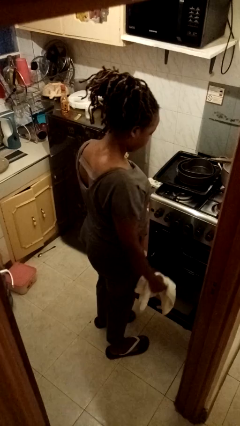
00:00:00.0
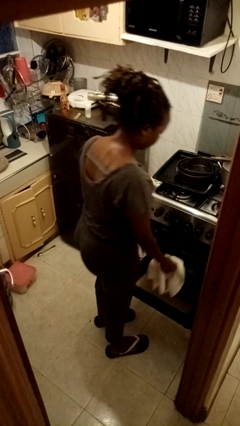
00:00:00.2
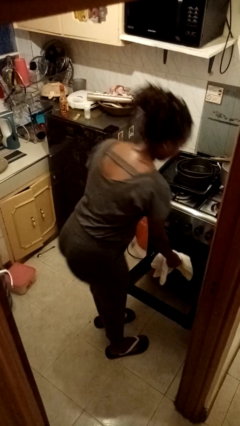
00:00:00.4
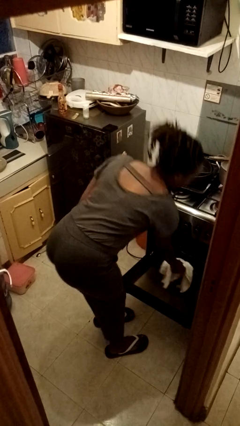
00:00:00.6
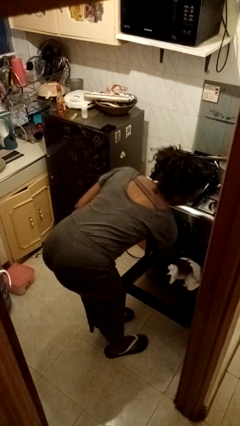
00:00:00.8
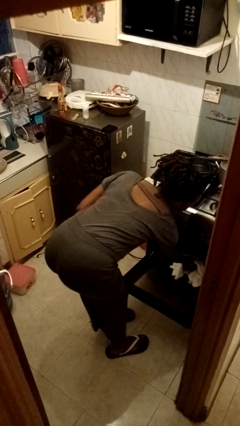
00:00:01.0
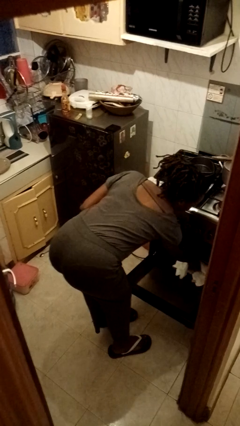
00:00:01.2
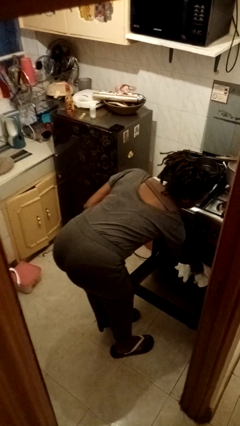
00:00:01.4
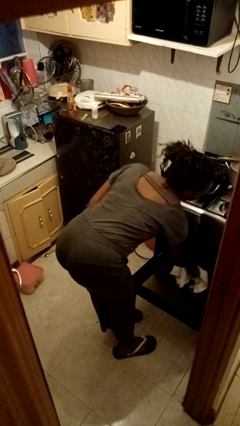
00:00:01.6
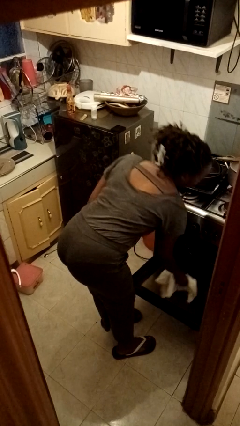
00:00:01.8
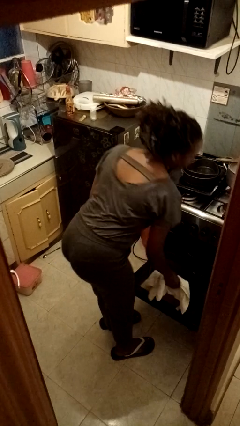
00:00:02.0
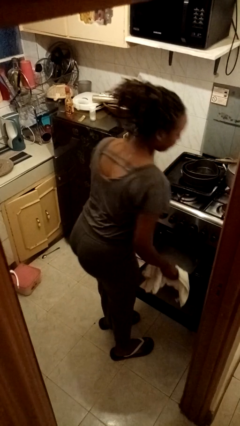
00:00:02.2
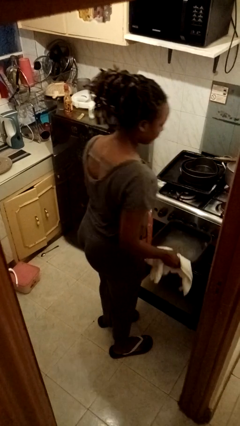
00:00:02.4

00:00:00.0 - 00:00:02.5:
person takes object from oven

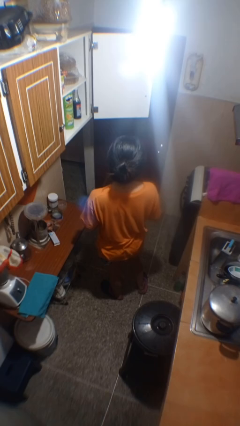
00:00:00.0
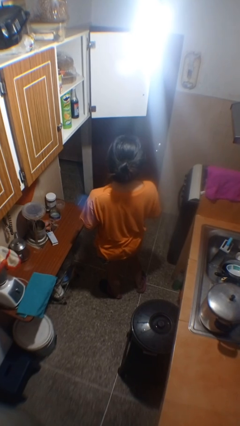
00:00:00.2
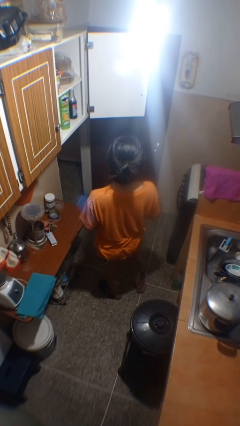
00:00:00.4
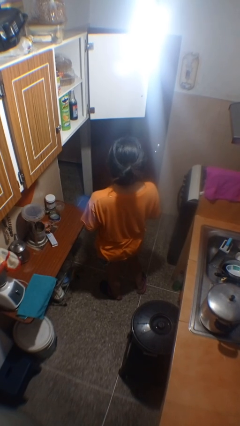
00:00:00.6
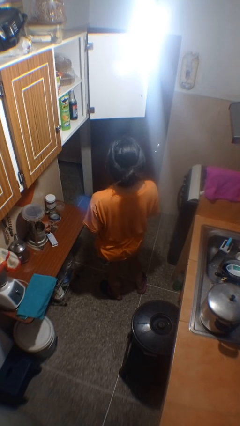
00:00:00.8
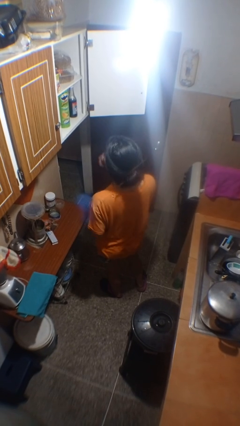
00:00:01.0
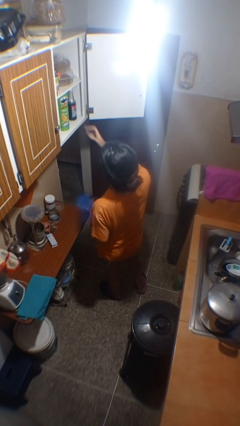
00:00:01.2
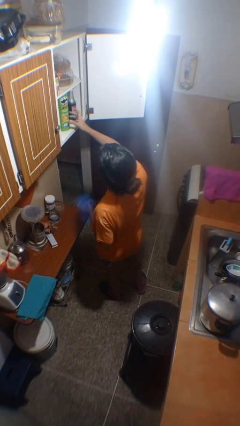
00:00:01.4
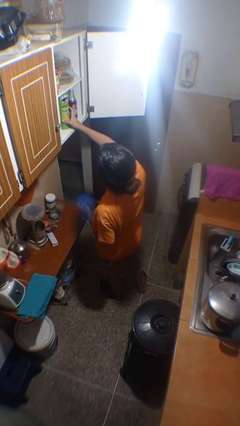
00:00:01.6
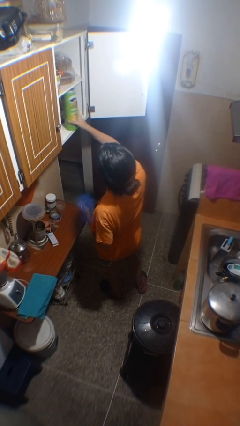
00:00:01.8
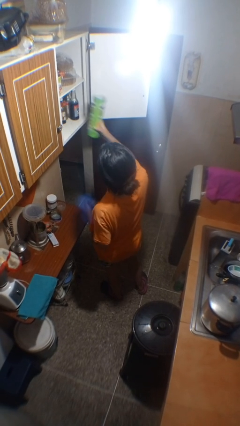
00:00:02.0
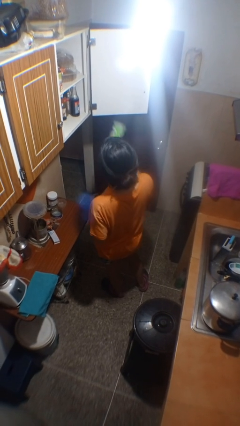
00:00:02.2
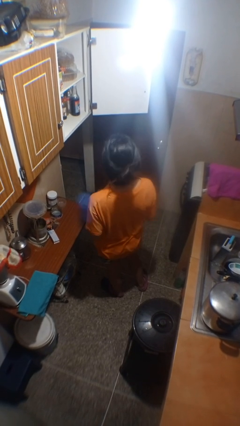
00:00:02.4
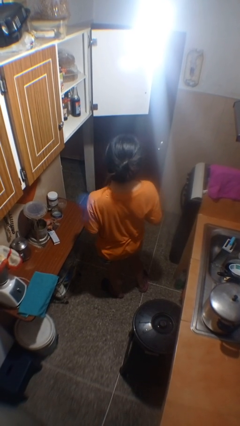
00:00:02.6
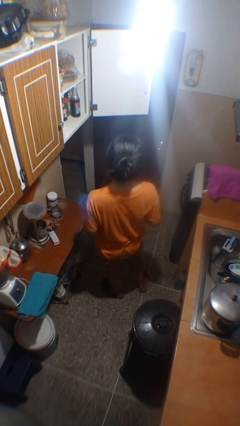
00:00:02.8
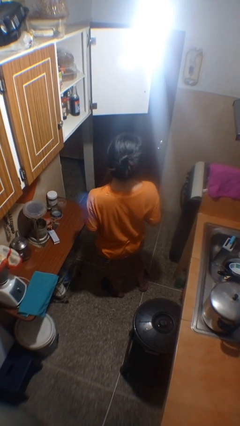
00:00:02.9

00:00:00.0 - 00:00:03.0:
person takes object from cabinet

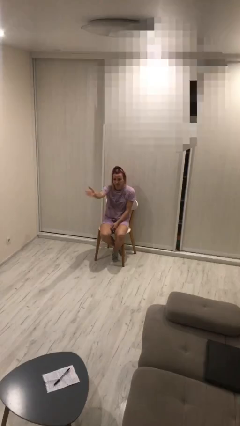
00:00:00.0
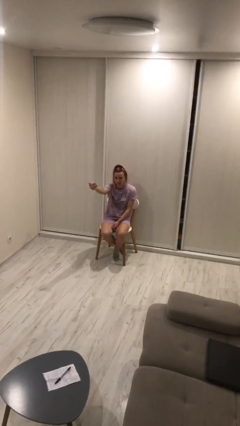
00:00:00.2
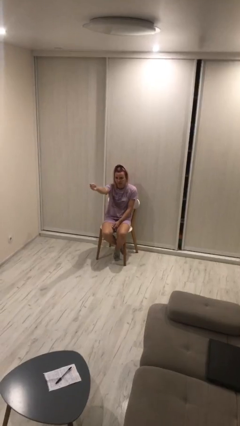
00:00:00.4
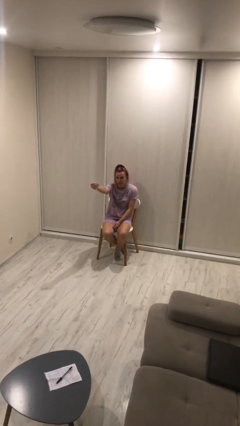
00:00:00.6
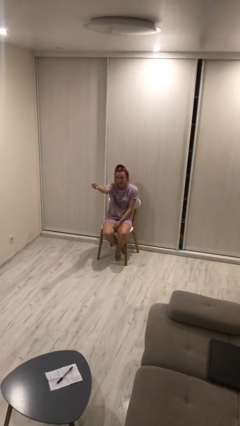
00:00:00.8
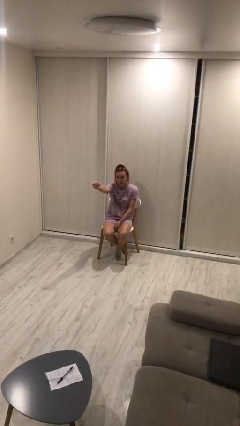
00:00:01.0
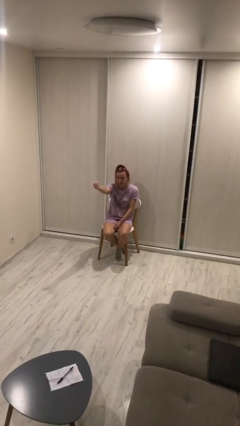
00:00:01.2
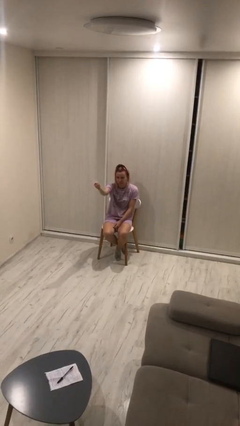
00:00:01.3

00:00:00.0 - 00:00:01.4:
person gestures come here

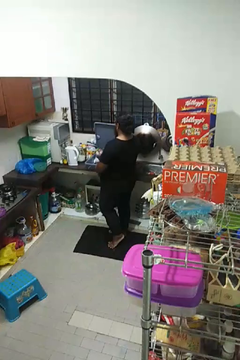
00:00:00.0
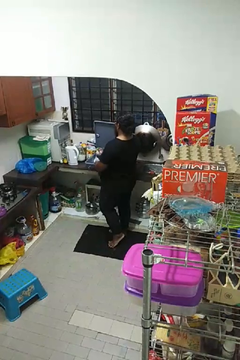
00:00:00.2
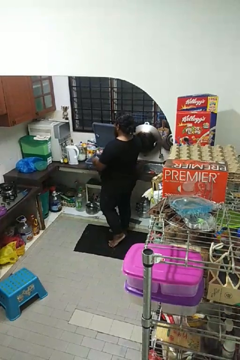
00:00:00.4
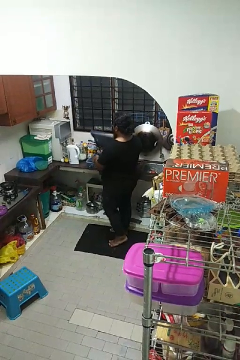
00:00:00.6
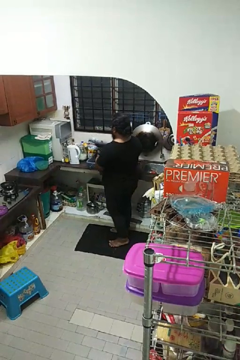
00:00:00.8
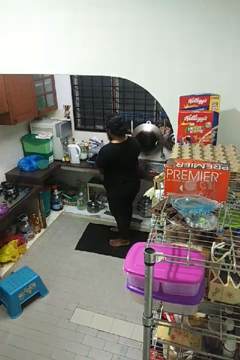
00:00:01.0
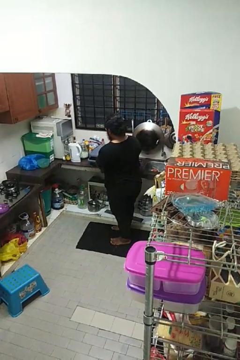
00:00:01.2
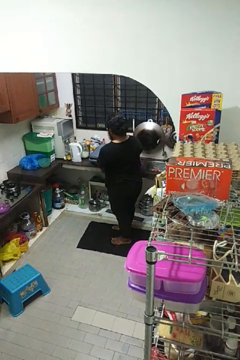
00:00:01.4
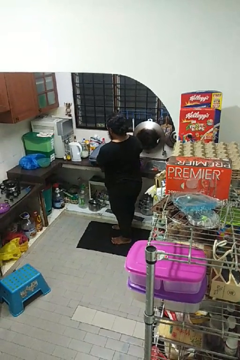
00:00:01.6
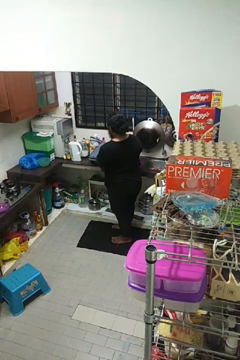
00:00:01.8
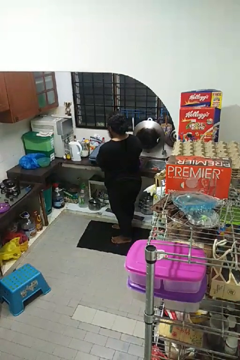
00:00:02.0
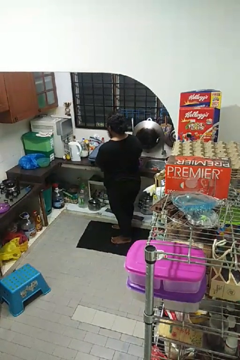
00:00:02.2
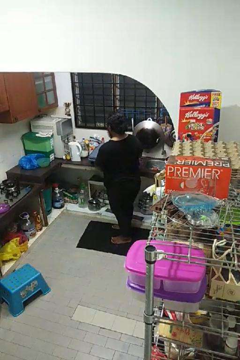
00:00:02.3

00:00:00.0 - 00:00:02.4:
person closes dishwasher

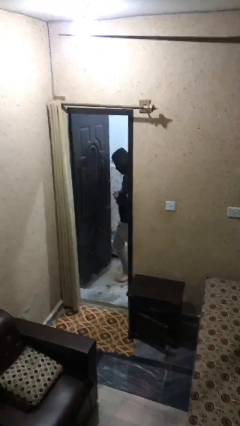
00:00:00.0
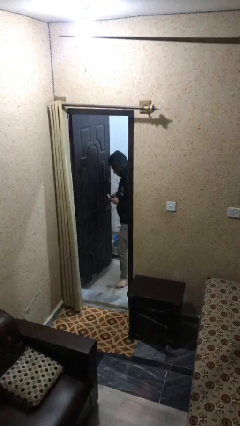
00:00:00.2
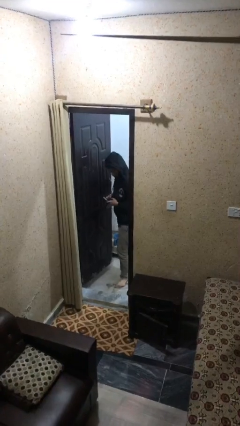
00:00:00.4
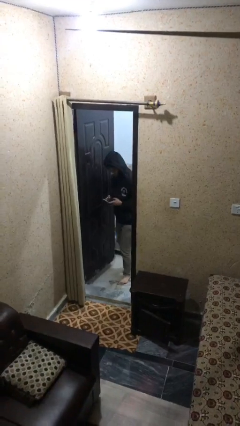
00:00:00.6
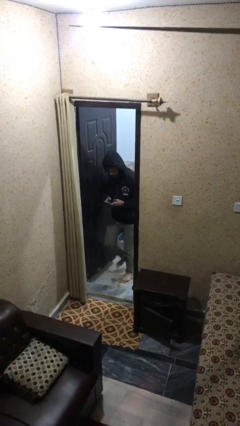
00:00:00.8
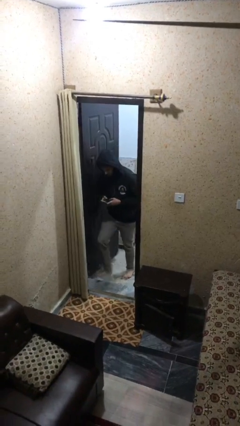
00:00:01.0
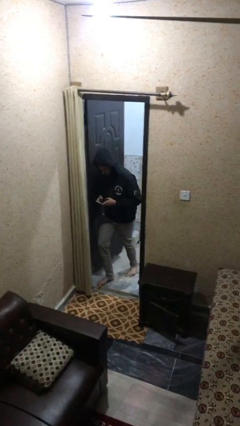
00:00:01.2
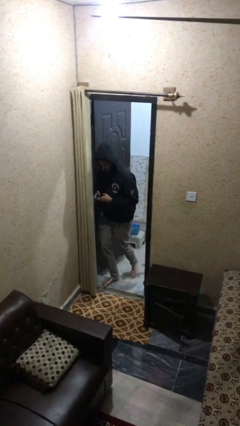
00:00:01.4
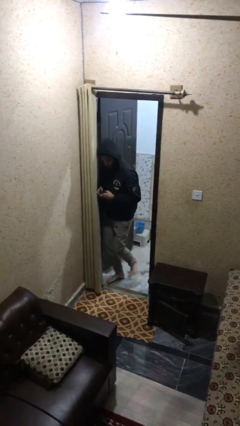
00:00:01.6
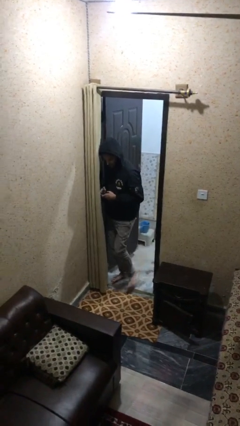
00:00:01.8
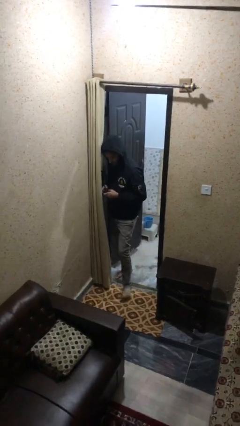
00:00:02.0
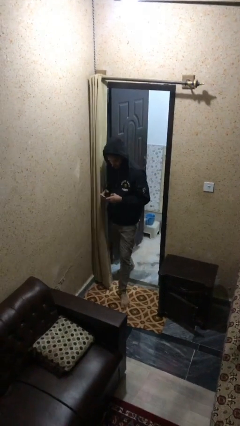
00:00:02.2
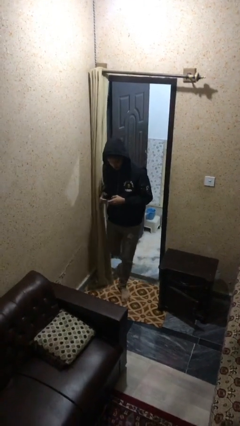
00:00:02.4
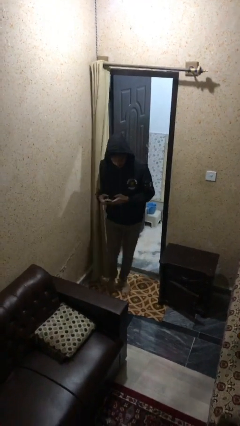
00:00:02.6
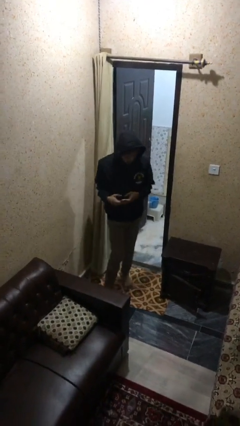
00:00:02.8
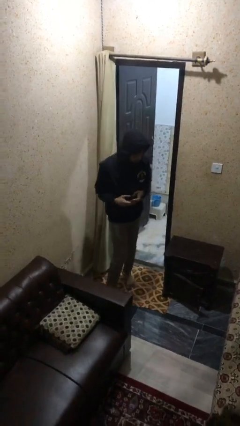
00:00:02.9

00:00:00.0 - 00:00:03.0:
person exits scene through structure

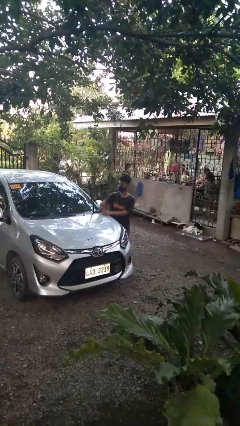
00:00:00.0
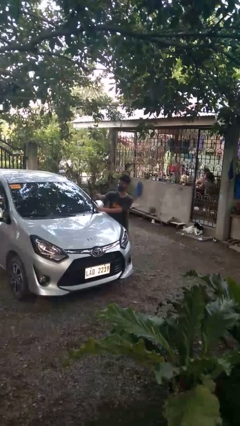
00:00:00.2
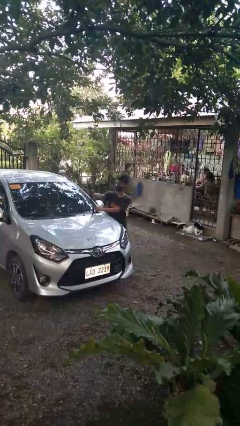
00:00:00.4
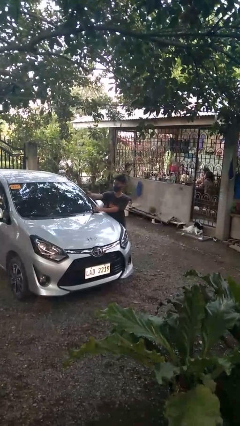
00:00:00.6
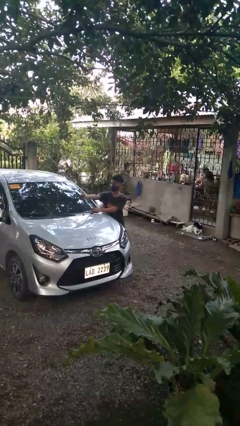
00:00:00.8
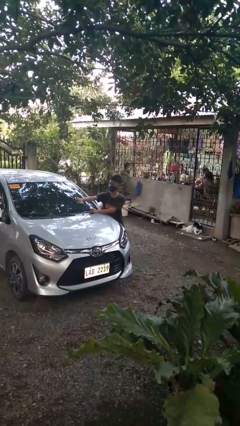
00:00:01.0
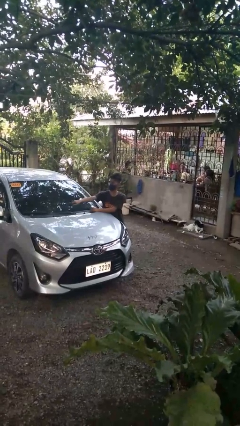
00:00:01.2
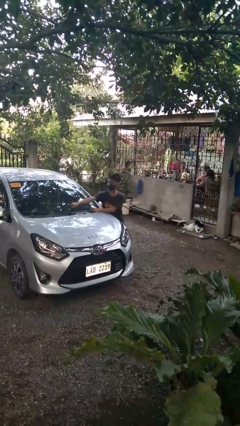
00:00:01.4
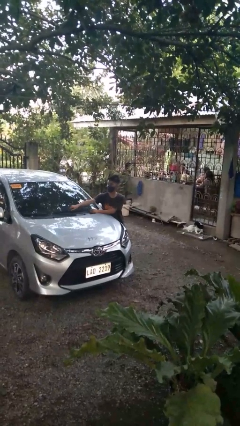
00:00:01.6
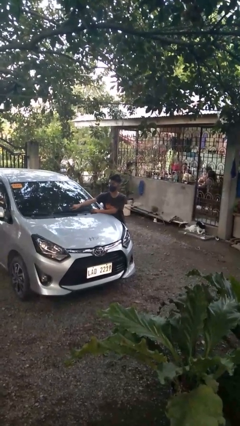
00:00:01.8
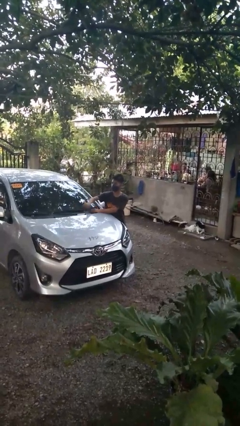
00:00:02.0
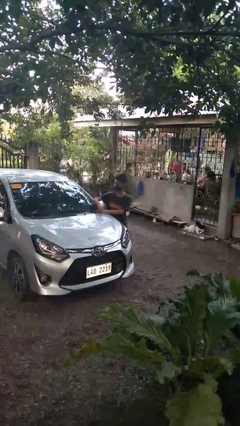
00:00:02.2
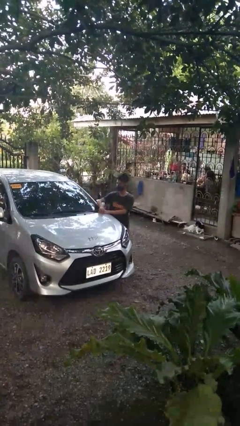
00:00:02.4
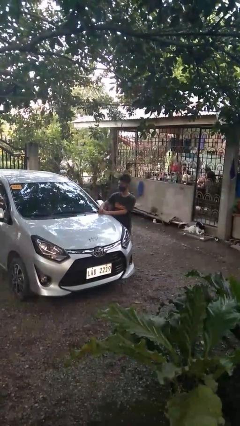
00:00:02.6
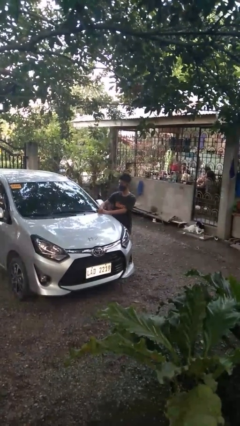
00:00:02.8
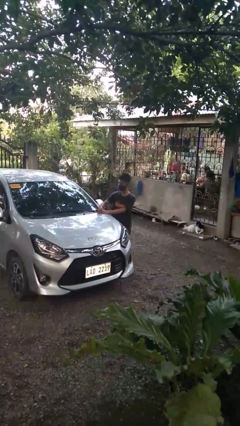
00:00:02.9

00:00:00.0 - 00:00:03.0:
person flips down car wipers

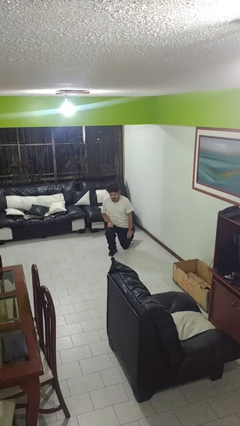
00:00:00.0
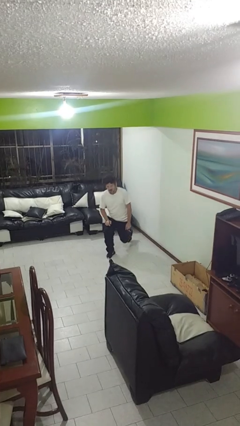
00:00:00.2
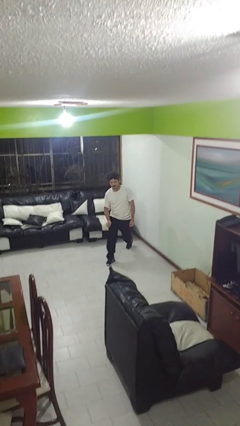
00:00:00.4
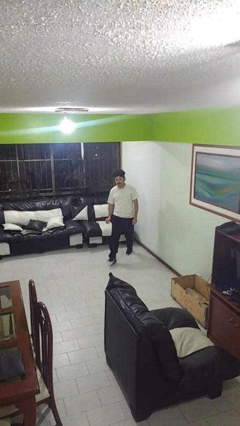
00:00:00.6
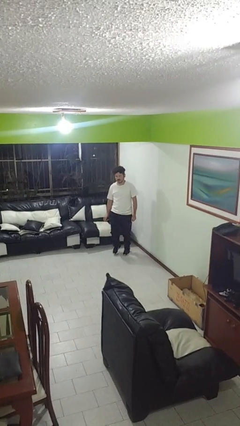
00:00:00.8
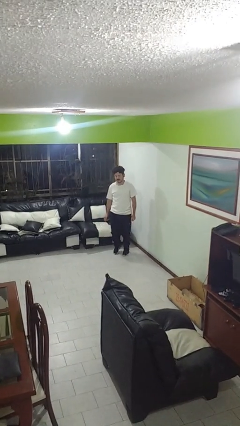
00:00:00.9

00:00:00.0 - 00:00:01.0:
person stands up from floor

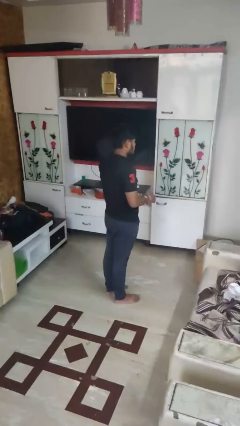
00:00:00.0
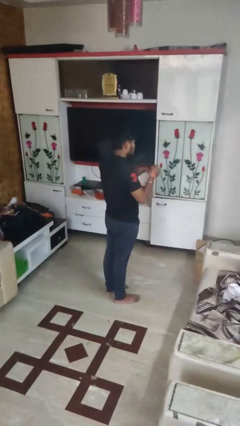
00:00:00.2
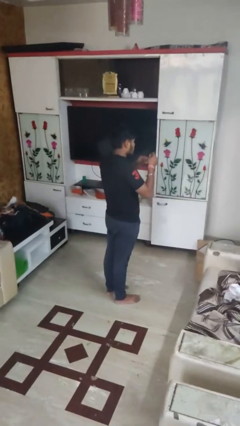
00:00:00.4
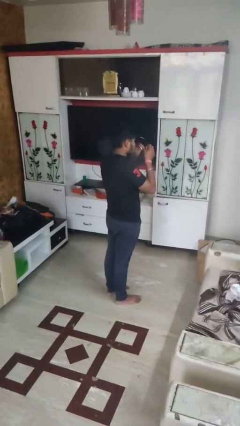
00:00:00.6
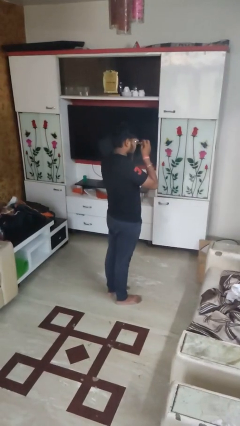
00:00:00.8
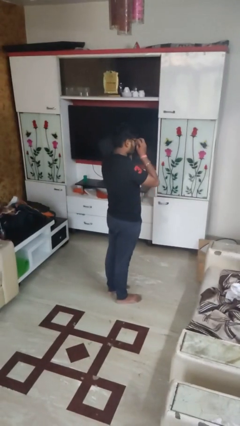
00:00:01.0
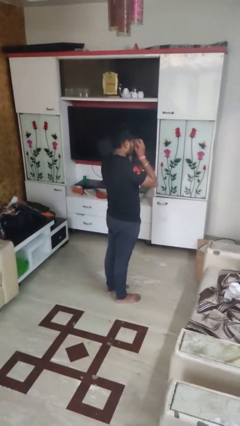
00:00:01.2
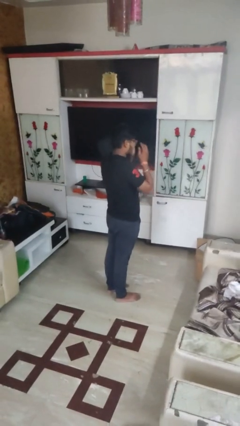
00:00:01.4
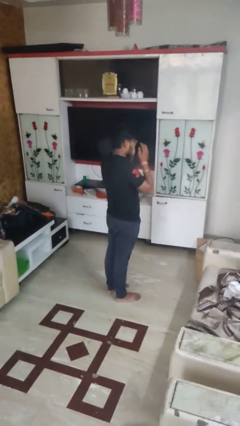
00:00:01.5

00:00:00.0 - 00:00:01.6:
person puts on glasses
